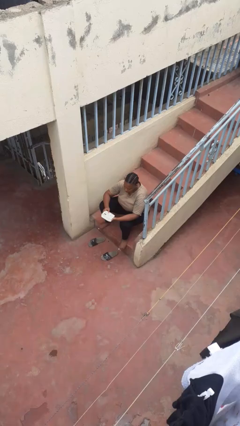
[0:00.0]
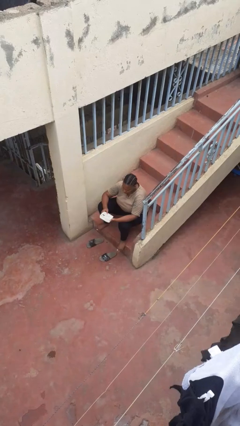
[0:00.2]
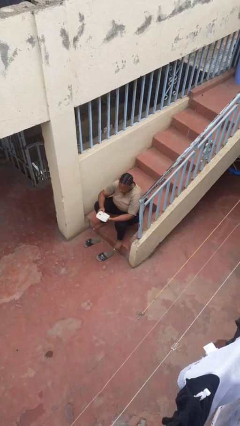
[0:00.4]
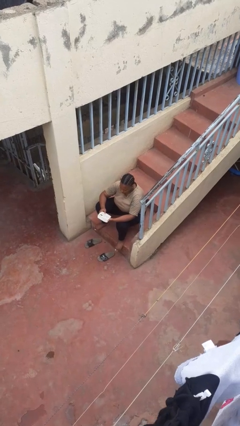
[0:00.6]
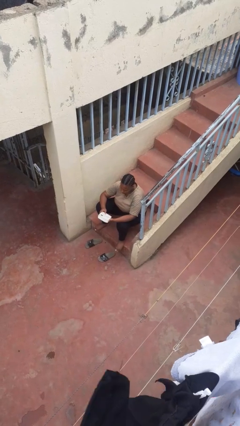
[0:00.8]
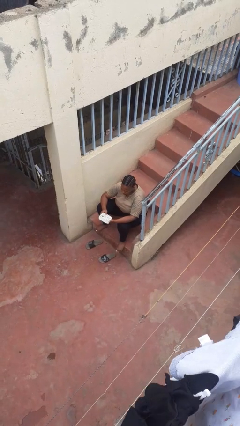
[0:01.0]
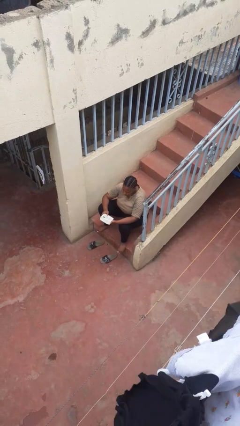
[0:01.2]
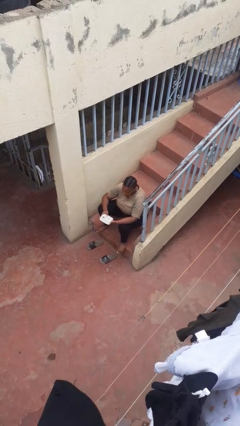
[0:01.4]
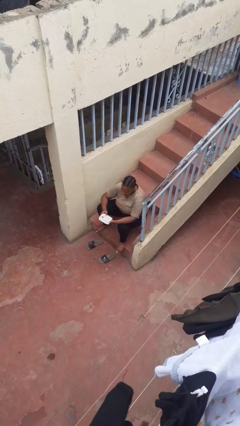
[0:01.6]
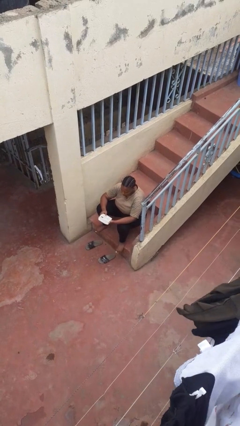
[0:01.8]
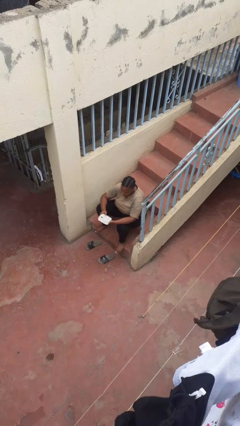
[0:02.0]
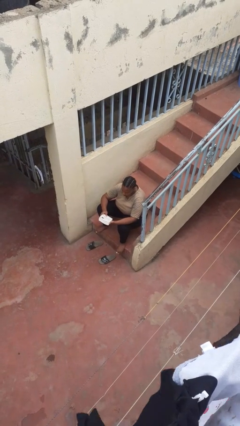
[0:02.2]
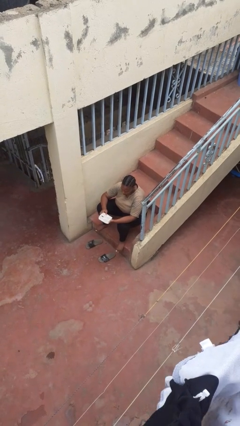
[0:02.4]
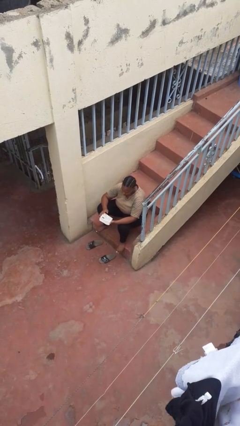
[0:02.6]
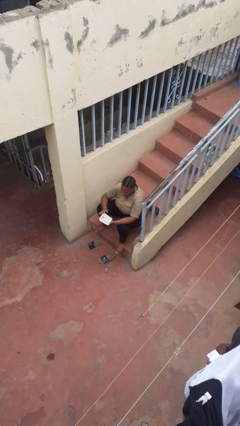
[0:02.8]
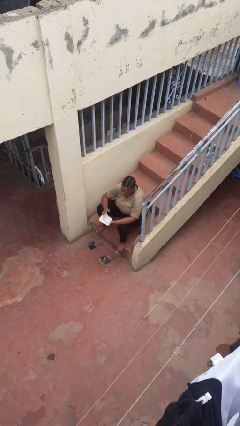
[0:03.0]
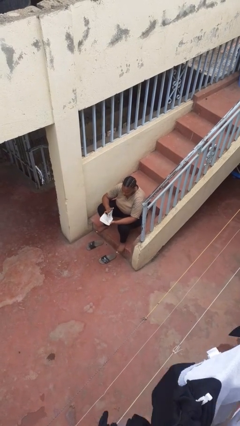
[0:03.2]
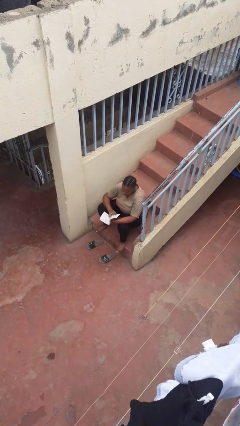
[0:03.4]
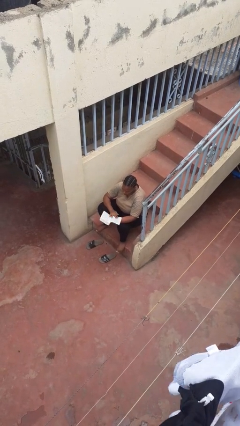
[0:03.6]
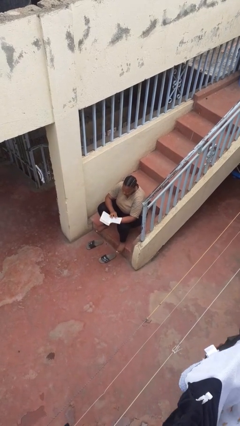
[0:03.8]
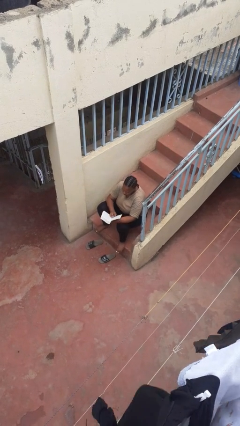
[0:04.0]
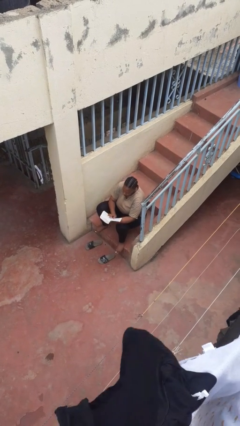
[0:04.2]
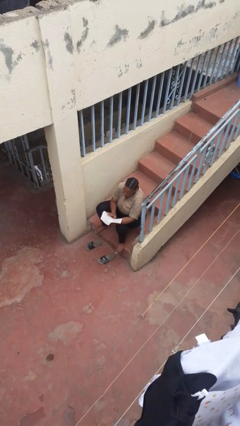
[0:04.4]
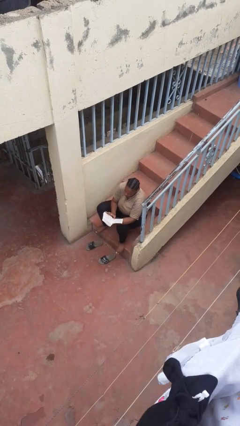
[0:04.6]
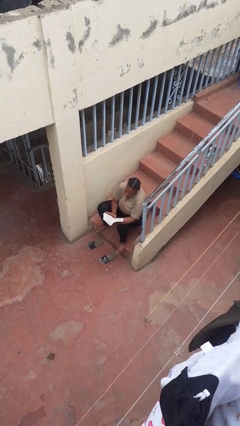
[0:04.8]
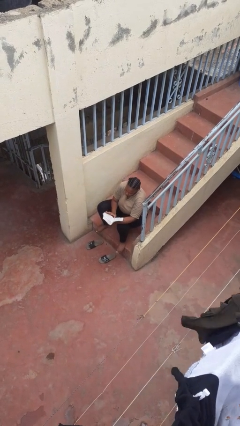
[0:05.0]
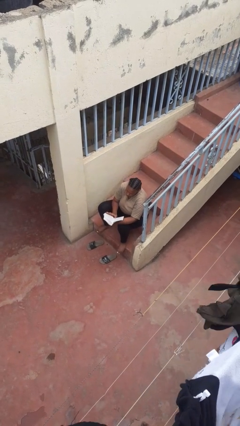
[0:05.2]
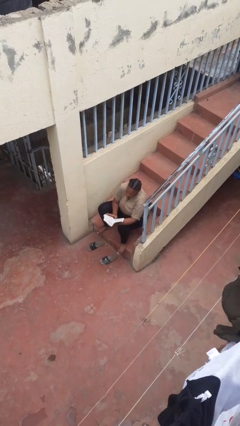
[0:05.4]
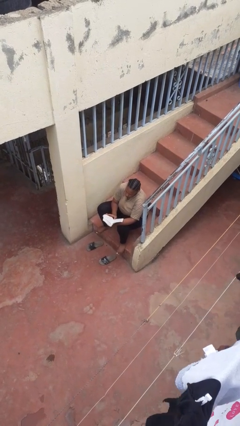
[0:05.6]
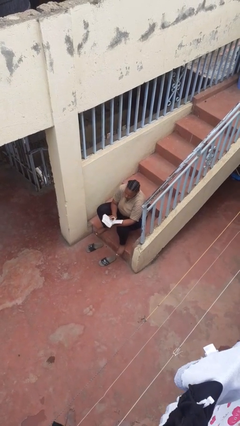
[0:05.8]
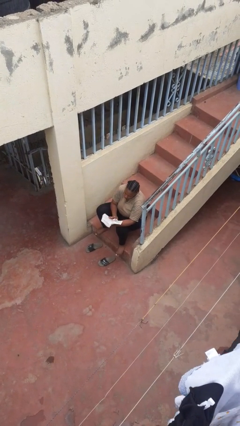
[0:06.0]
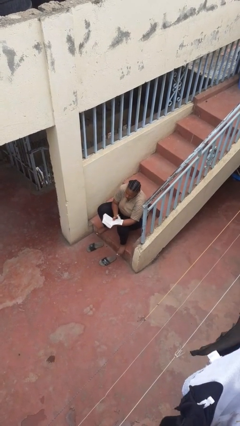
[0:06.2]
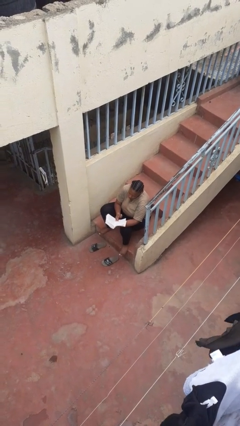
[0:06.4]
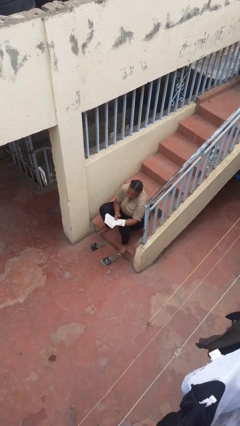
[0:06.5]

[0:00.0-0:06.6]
person reads book

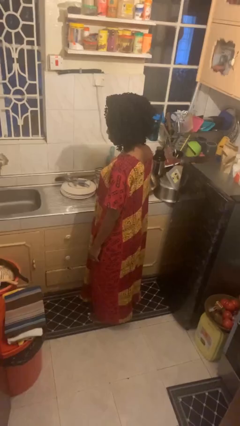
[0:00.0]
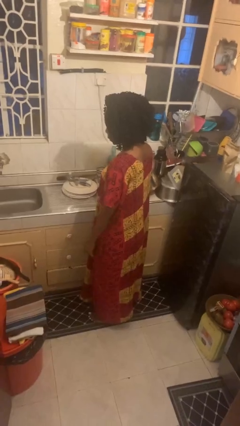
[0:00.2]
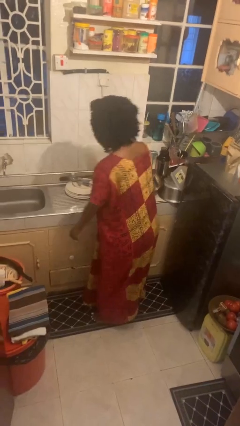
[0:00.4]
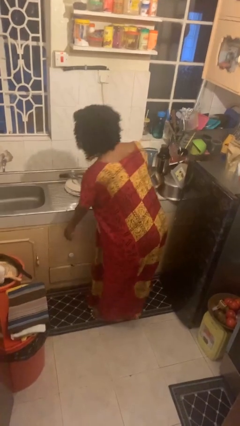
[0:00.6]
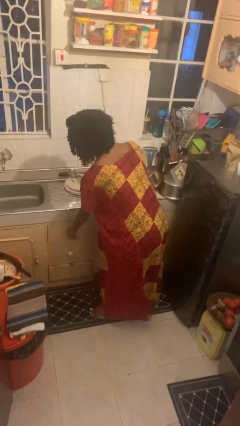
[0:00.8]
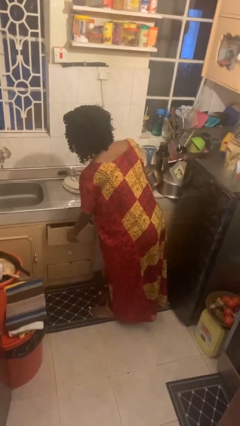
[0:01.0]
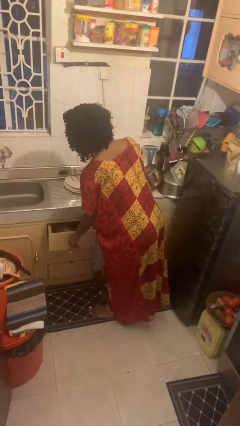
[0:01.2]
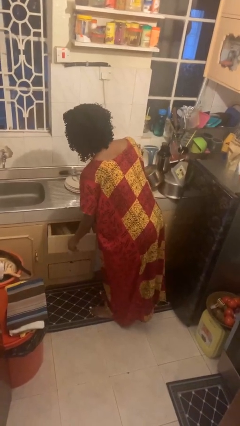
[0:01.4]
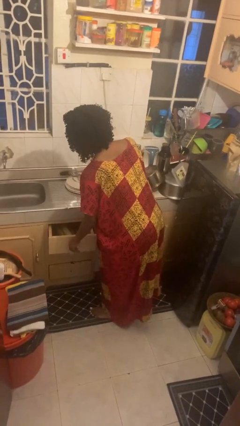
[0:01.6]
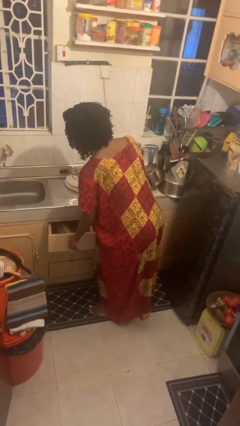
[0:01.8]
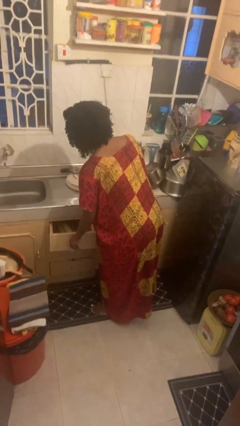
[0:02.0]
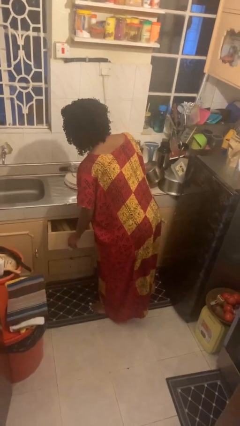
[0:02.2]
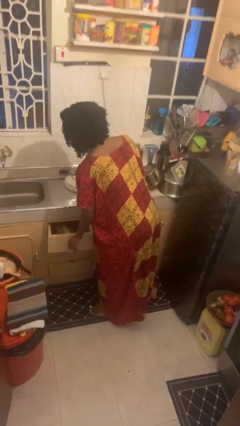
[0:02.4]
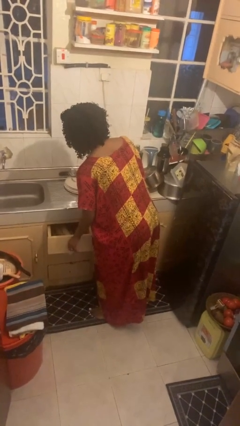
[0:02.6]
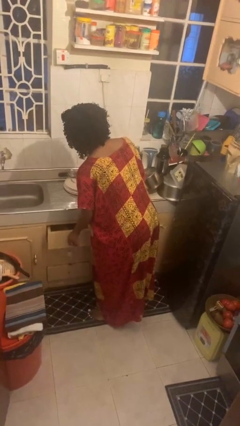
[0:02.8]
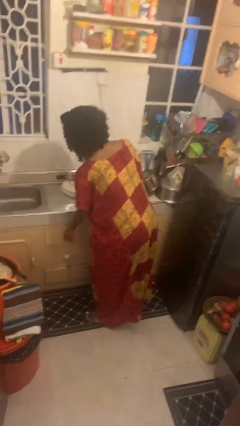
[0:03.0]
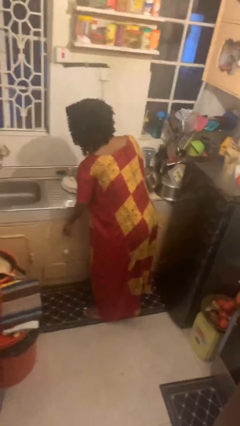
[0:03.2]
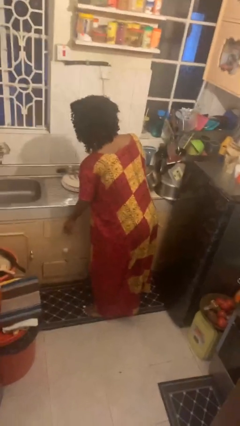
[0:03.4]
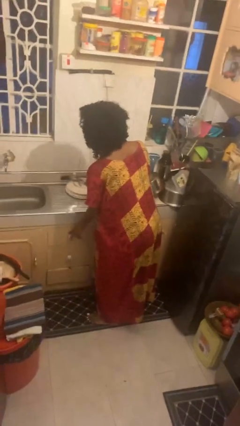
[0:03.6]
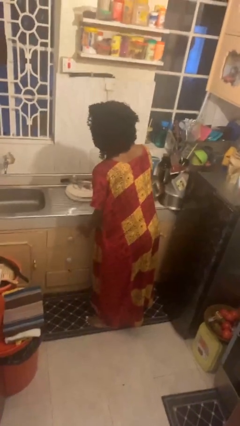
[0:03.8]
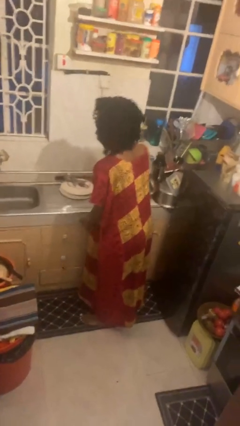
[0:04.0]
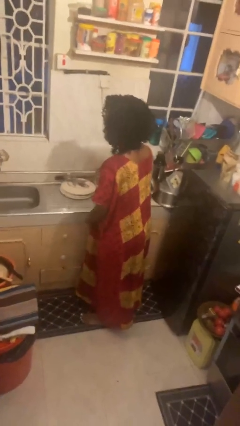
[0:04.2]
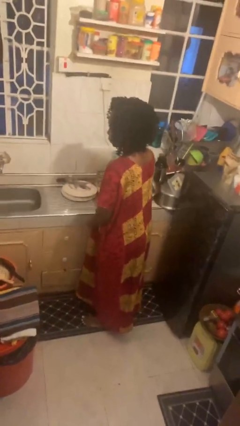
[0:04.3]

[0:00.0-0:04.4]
person opens kitchen drawer

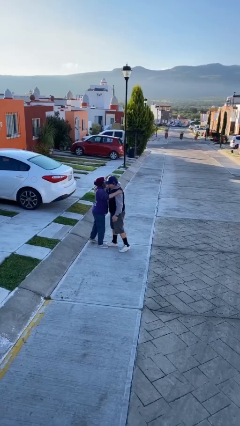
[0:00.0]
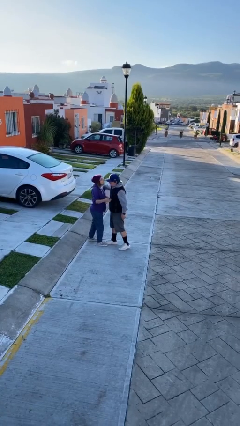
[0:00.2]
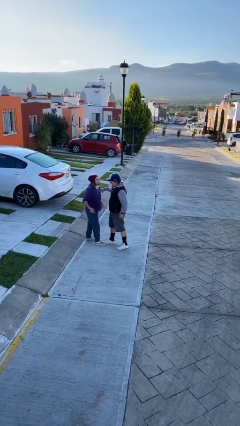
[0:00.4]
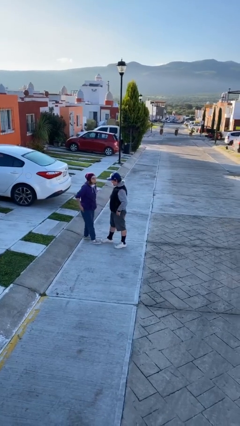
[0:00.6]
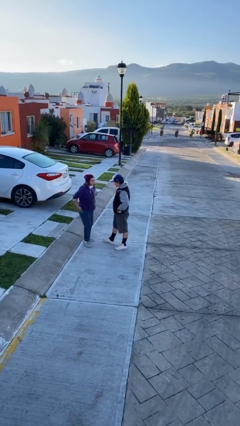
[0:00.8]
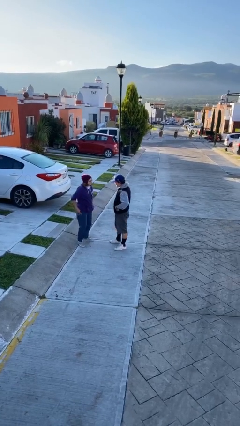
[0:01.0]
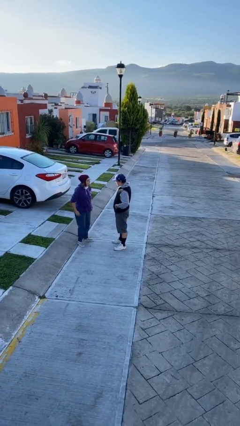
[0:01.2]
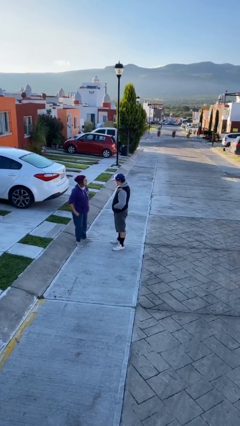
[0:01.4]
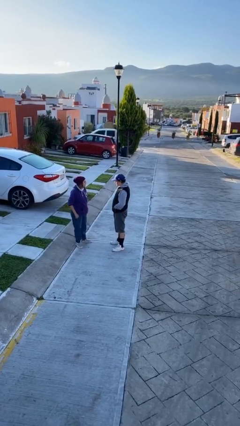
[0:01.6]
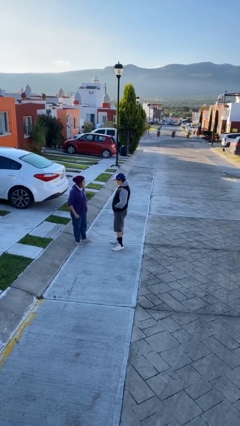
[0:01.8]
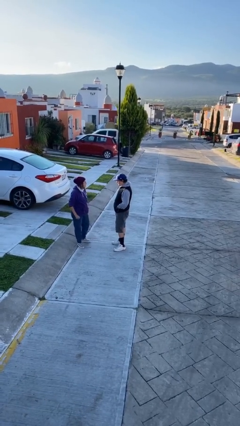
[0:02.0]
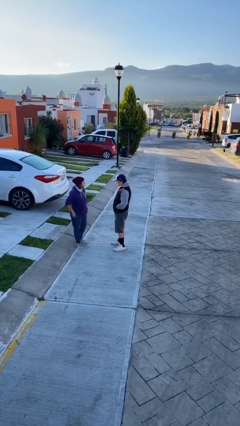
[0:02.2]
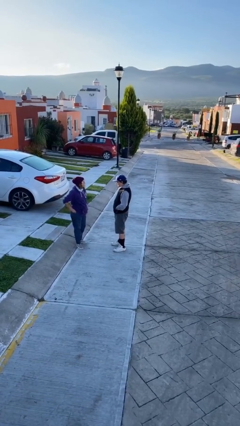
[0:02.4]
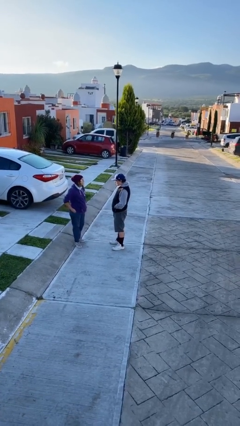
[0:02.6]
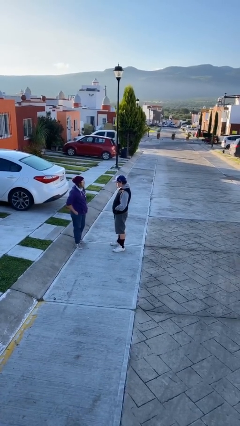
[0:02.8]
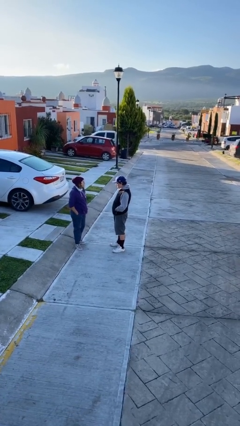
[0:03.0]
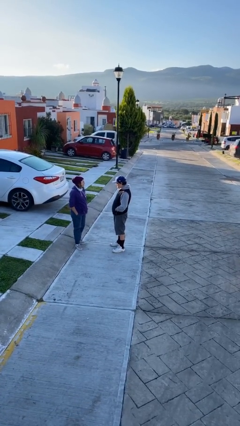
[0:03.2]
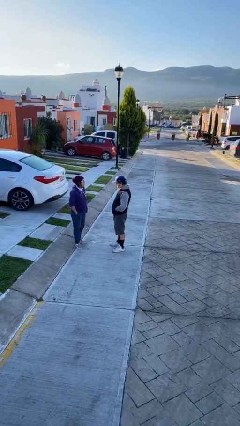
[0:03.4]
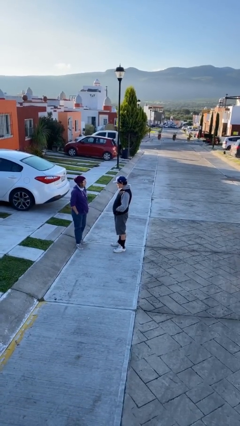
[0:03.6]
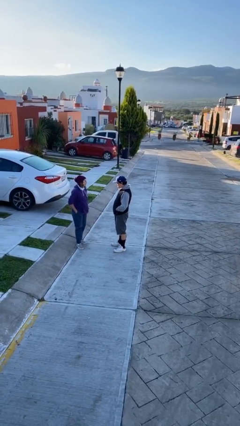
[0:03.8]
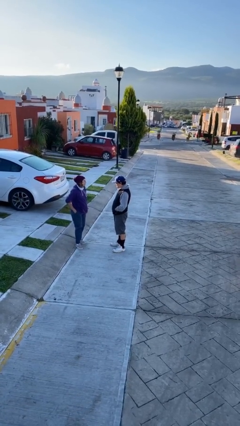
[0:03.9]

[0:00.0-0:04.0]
person talks to person

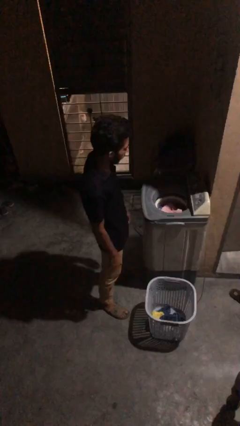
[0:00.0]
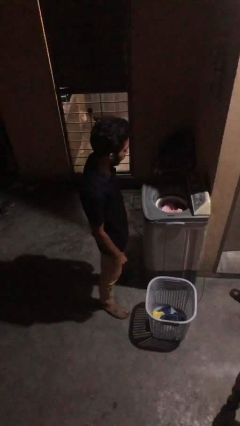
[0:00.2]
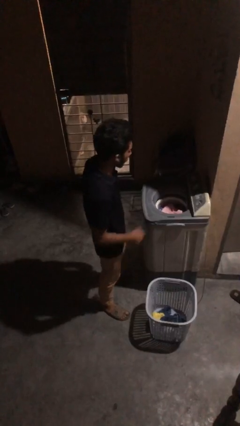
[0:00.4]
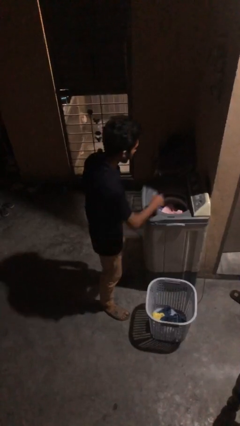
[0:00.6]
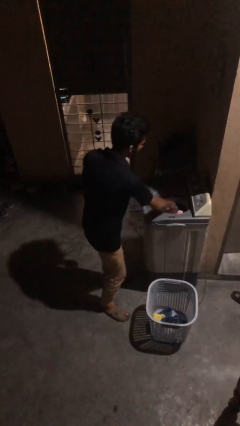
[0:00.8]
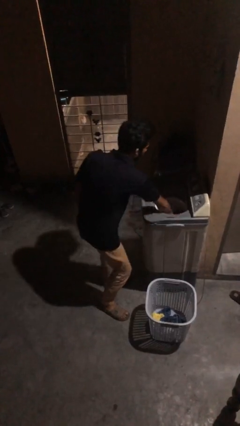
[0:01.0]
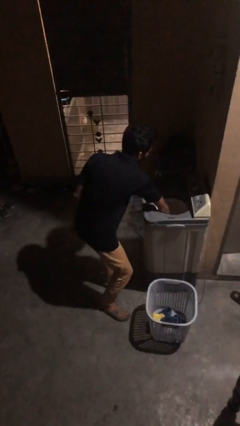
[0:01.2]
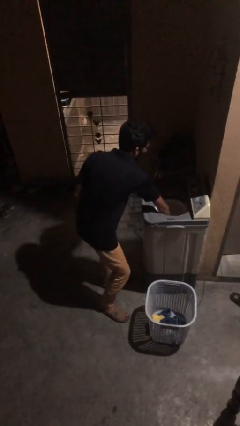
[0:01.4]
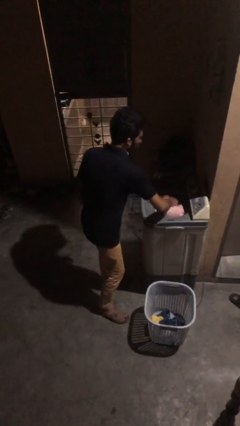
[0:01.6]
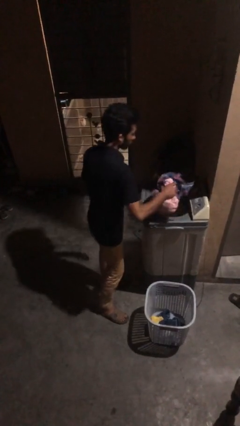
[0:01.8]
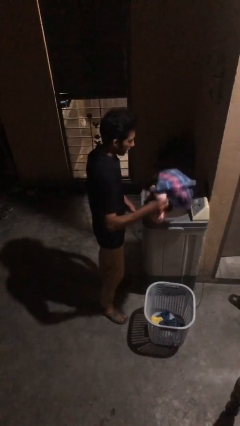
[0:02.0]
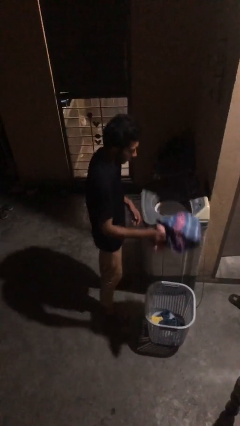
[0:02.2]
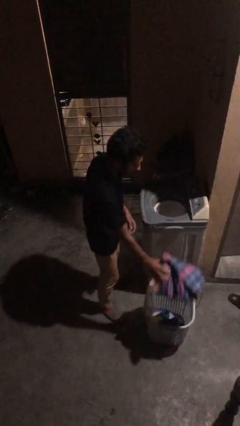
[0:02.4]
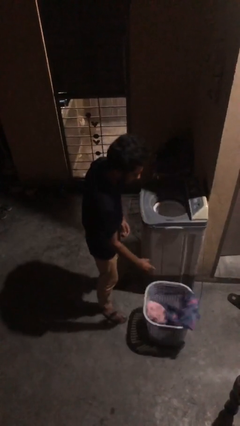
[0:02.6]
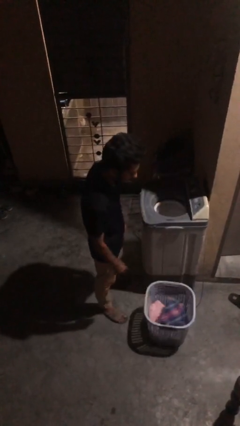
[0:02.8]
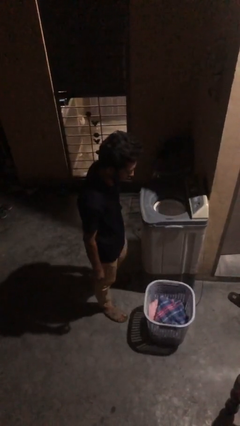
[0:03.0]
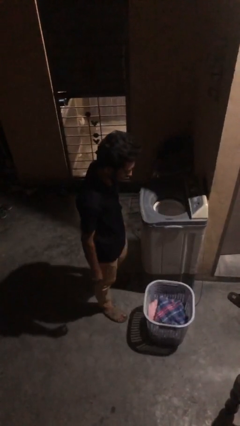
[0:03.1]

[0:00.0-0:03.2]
person unloads dryer
